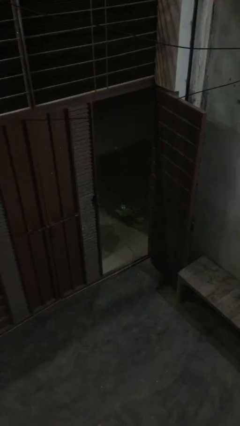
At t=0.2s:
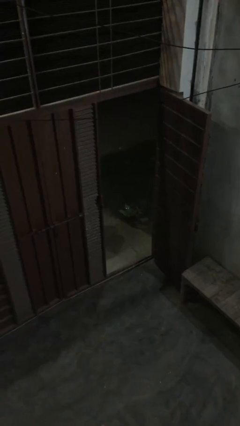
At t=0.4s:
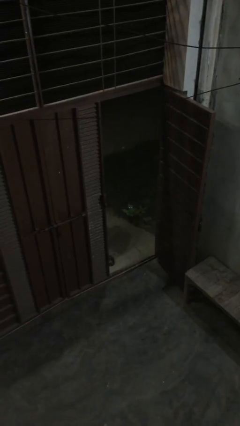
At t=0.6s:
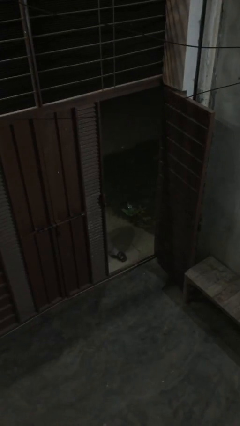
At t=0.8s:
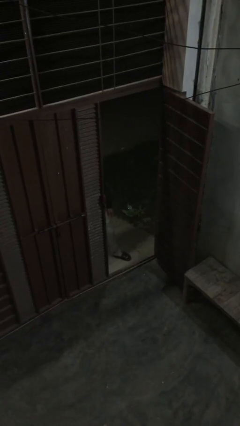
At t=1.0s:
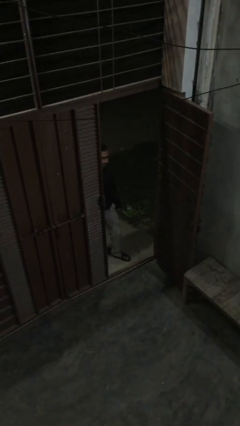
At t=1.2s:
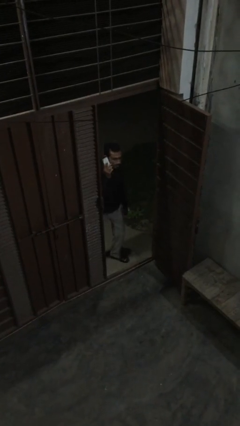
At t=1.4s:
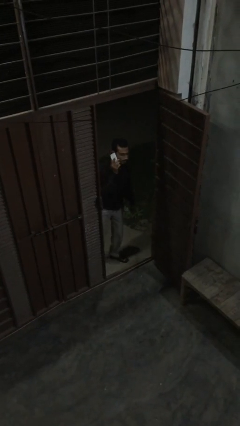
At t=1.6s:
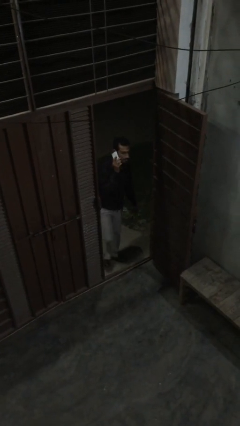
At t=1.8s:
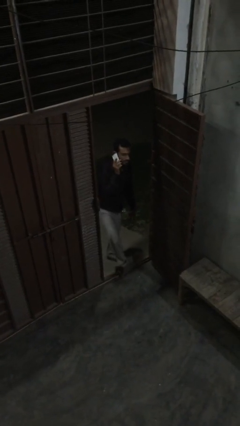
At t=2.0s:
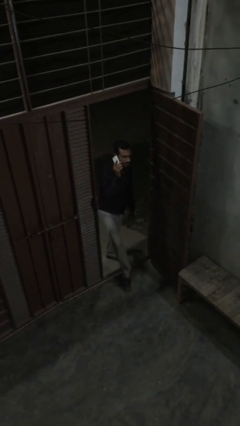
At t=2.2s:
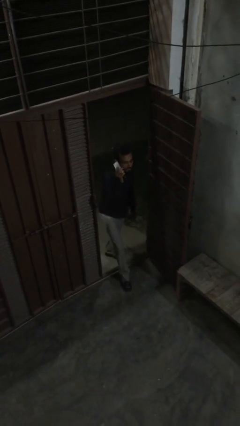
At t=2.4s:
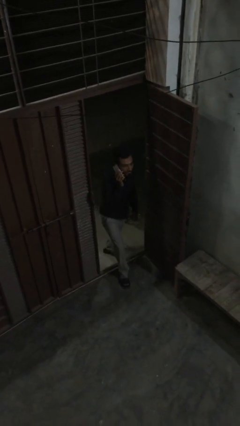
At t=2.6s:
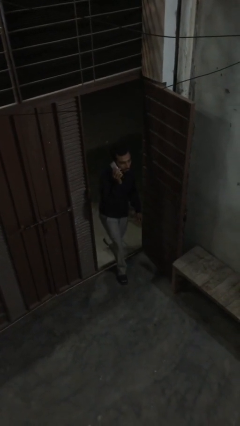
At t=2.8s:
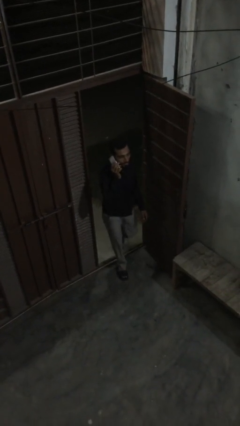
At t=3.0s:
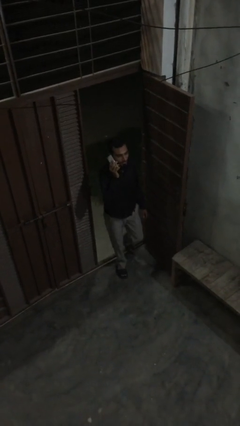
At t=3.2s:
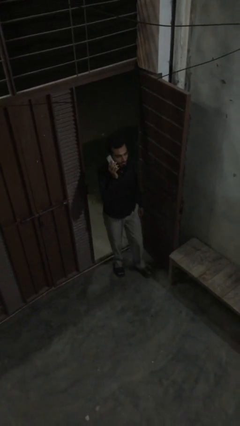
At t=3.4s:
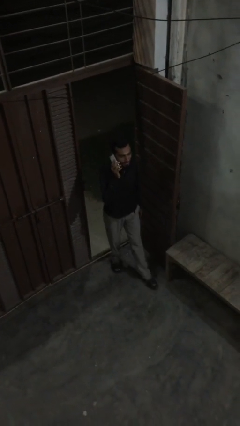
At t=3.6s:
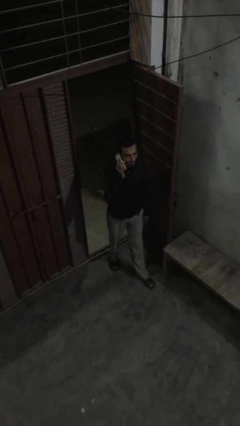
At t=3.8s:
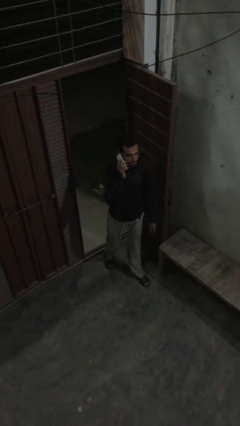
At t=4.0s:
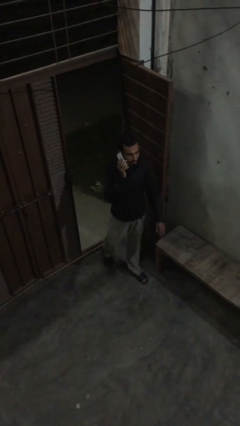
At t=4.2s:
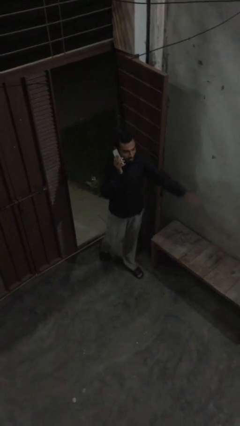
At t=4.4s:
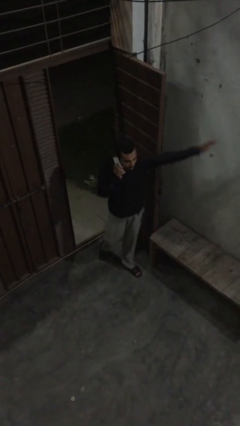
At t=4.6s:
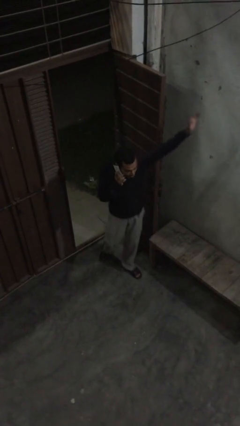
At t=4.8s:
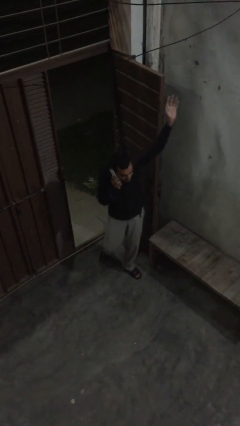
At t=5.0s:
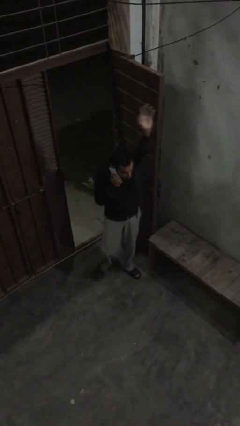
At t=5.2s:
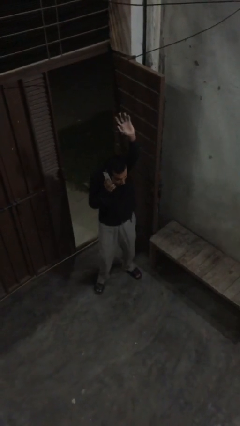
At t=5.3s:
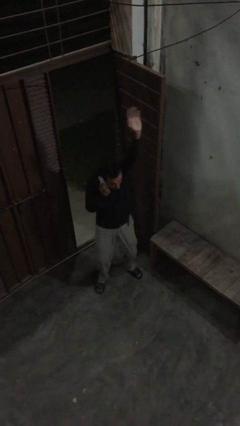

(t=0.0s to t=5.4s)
person enters scene through structure

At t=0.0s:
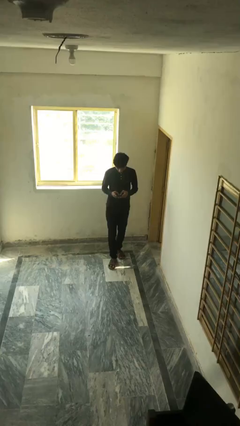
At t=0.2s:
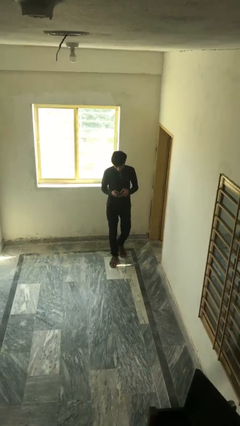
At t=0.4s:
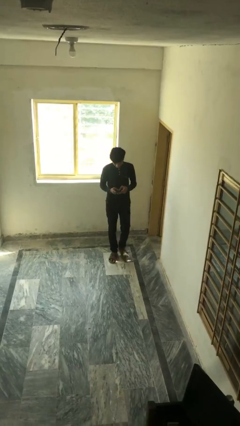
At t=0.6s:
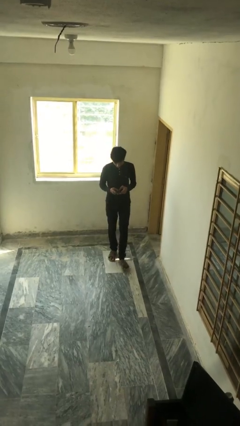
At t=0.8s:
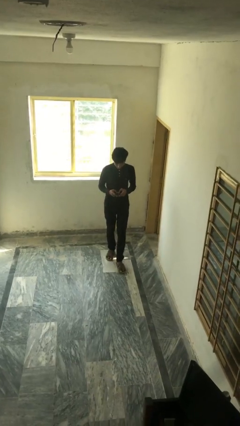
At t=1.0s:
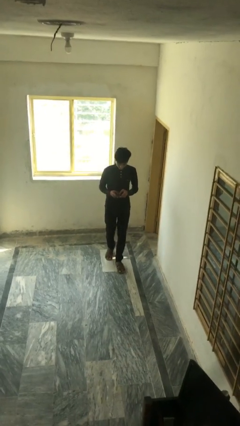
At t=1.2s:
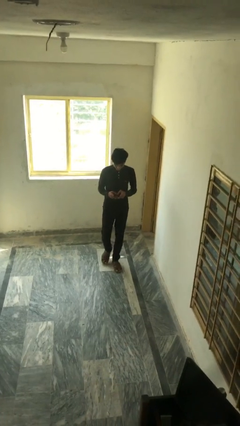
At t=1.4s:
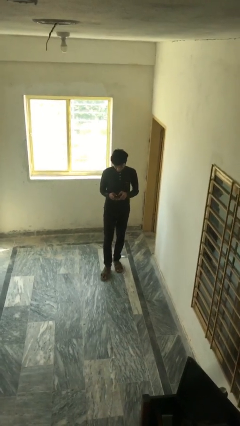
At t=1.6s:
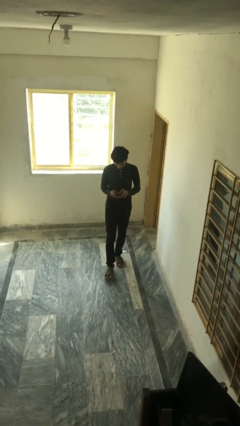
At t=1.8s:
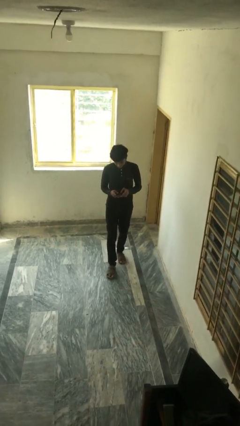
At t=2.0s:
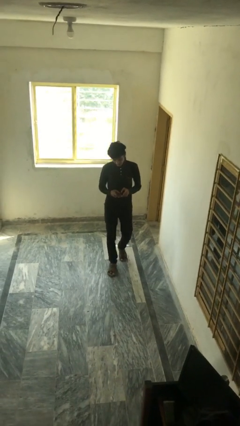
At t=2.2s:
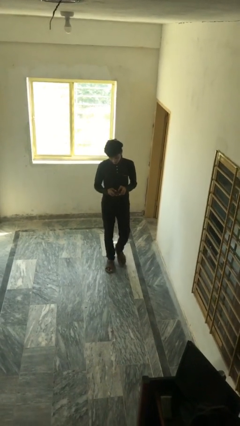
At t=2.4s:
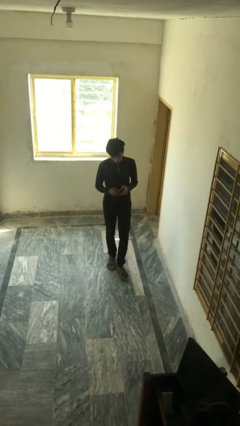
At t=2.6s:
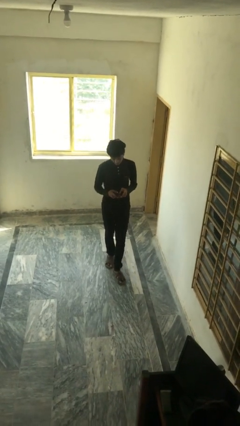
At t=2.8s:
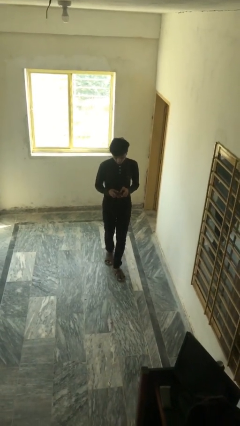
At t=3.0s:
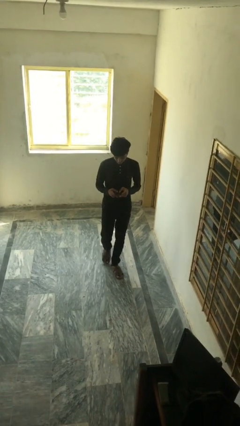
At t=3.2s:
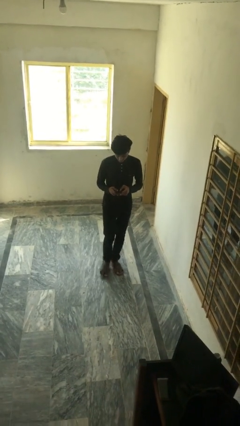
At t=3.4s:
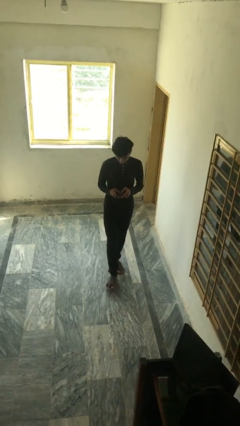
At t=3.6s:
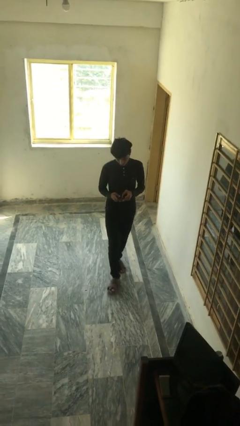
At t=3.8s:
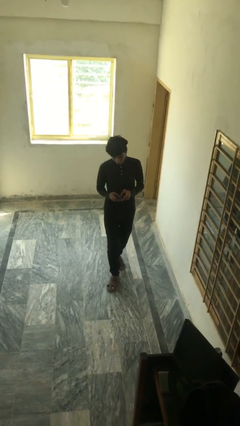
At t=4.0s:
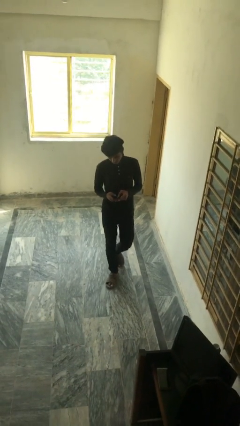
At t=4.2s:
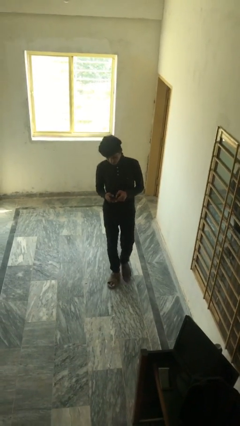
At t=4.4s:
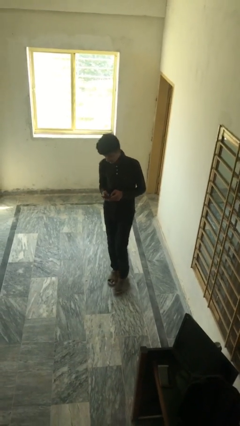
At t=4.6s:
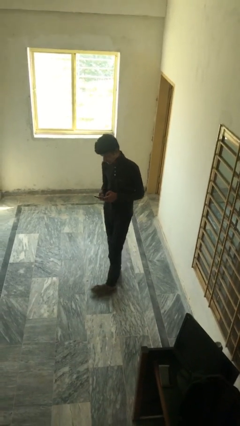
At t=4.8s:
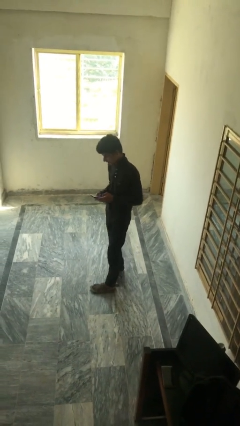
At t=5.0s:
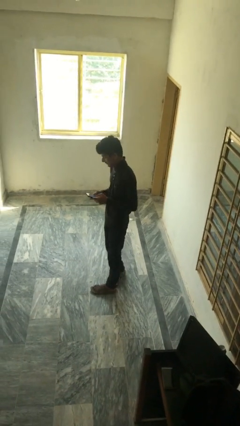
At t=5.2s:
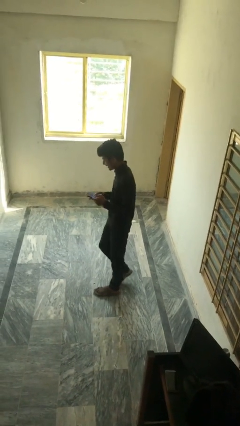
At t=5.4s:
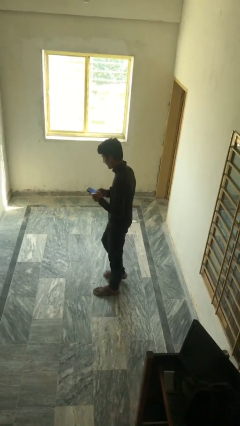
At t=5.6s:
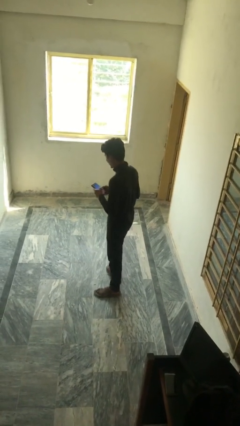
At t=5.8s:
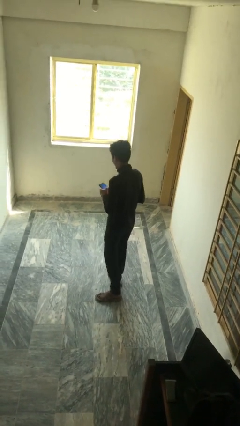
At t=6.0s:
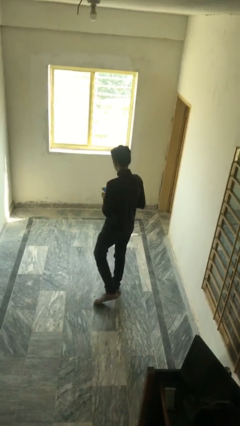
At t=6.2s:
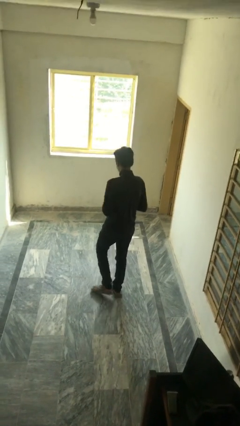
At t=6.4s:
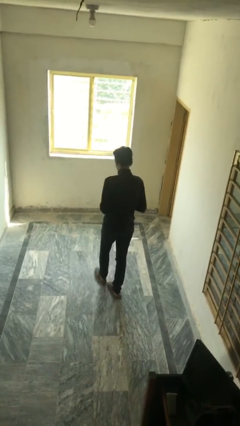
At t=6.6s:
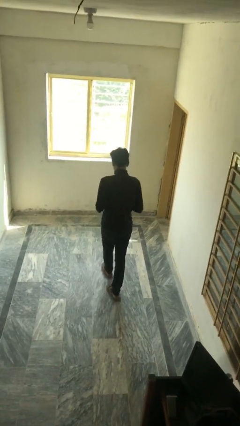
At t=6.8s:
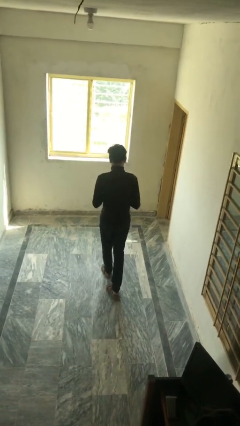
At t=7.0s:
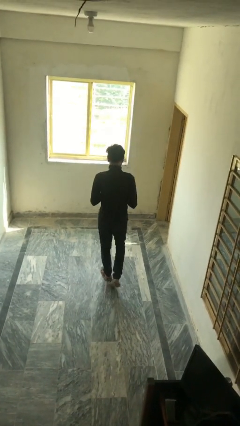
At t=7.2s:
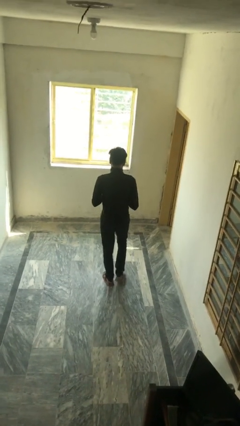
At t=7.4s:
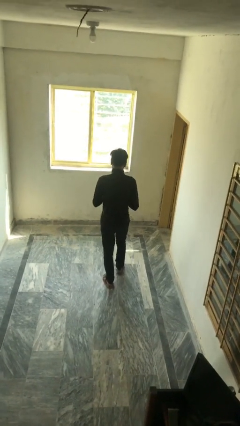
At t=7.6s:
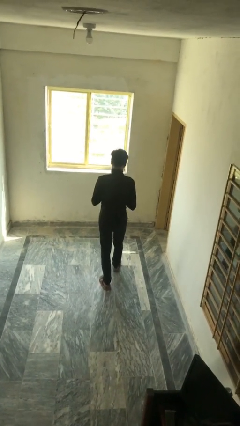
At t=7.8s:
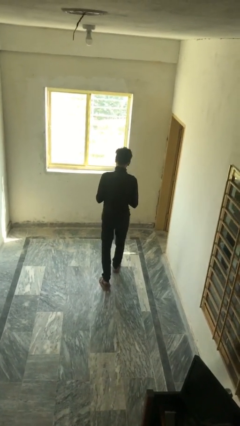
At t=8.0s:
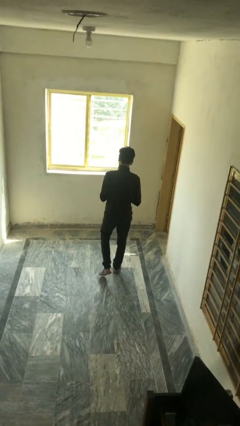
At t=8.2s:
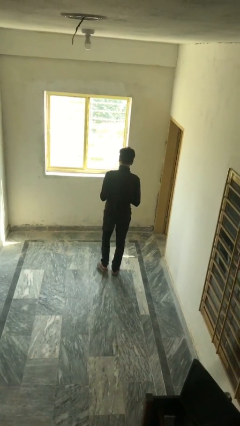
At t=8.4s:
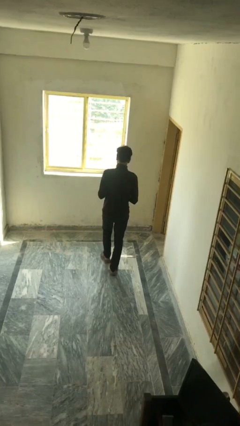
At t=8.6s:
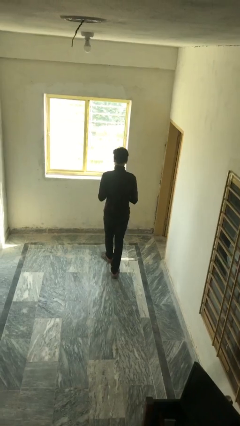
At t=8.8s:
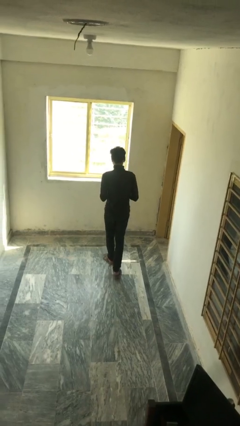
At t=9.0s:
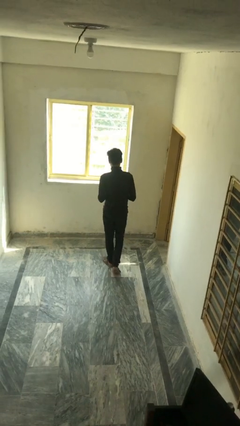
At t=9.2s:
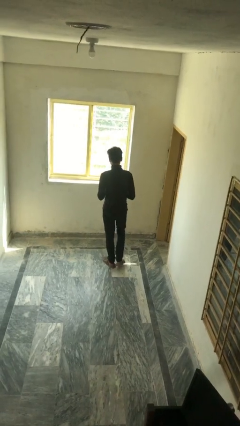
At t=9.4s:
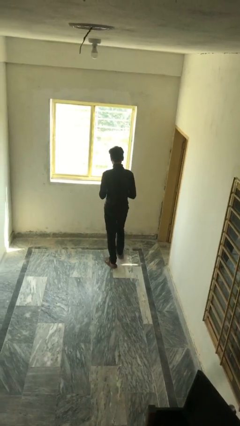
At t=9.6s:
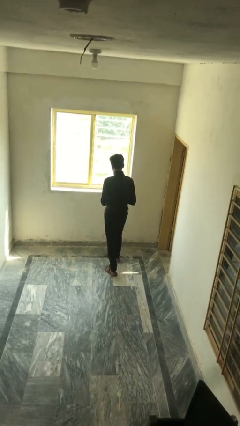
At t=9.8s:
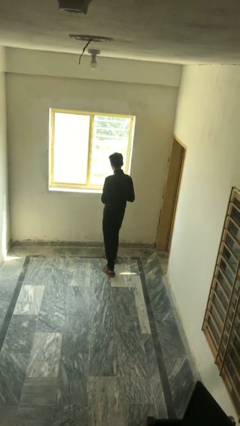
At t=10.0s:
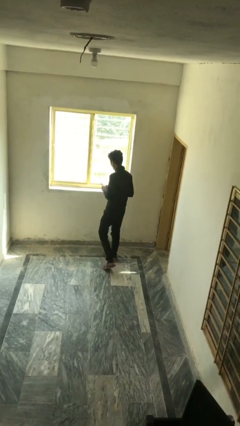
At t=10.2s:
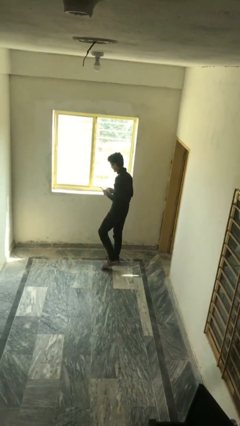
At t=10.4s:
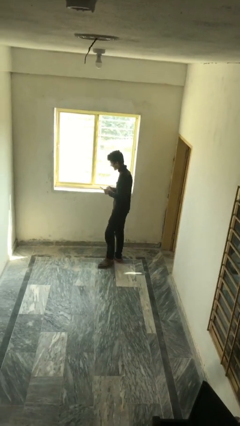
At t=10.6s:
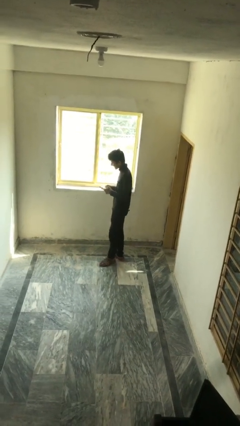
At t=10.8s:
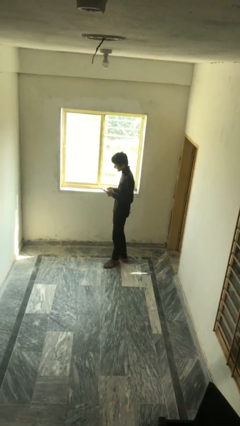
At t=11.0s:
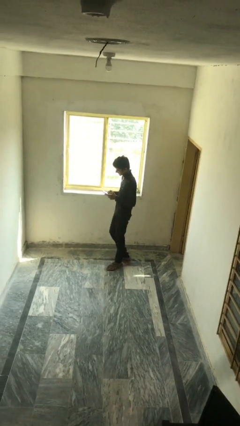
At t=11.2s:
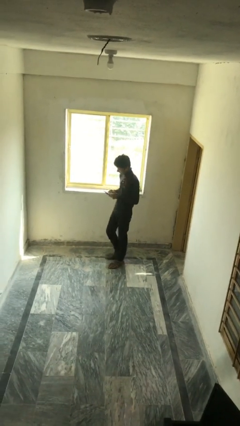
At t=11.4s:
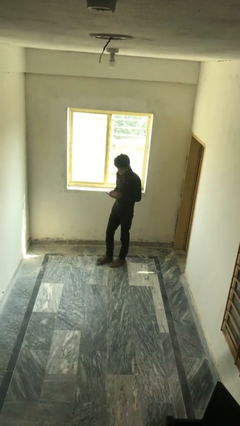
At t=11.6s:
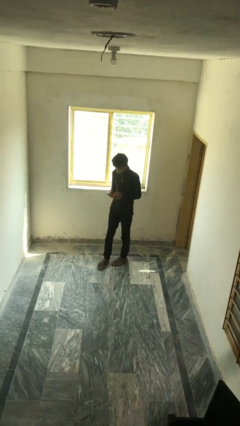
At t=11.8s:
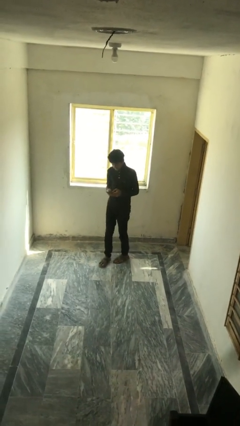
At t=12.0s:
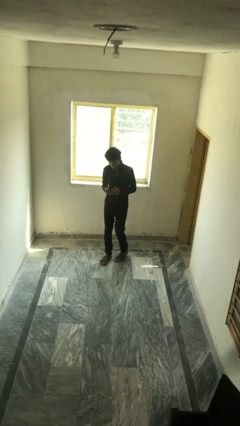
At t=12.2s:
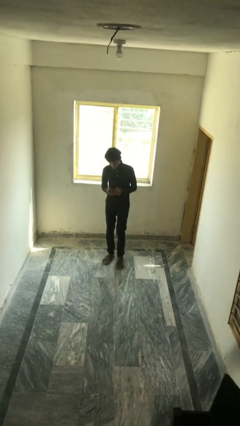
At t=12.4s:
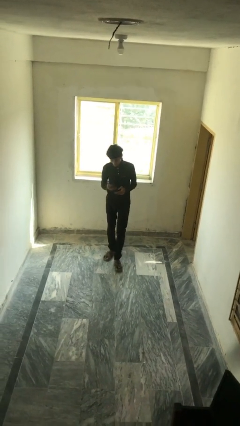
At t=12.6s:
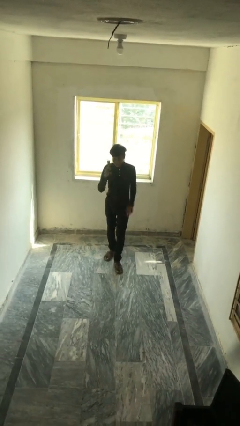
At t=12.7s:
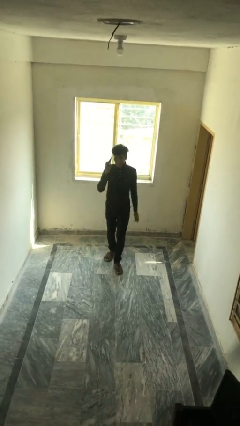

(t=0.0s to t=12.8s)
person texts on phone
